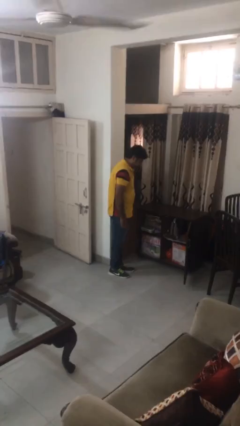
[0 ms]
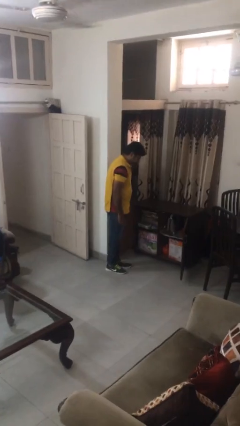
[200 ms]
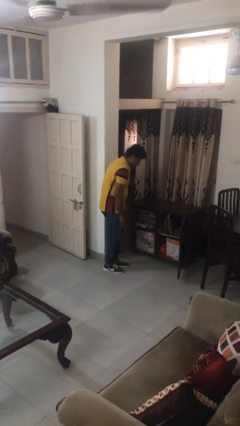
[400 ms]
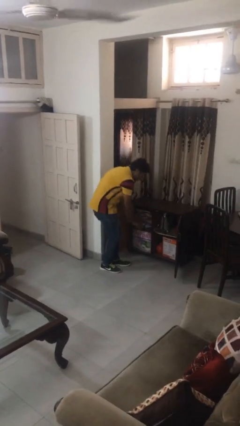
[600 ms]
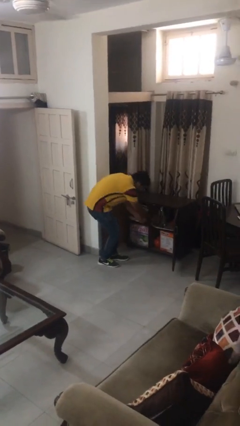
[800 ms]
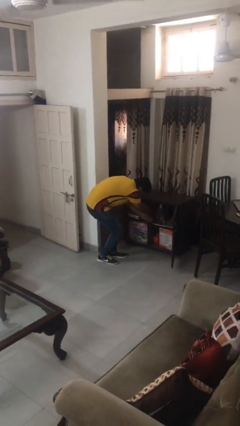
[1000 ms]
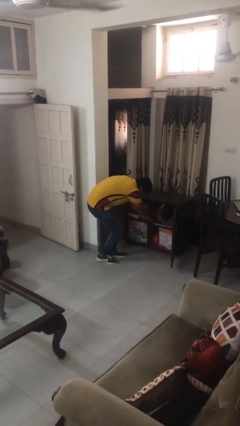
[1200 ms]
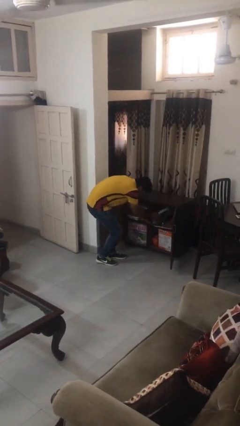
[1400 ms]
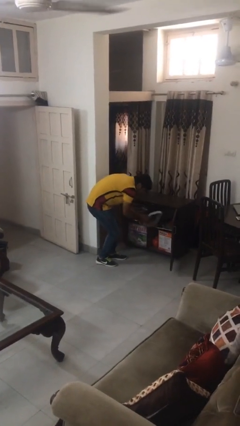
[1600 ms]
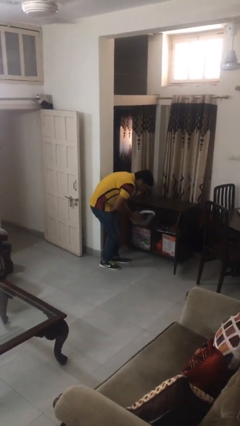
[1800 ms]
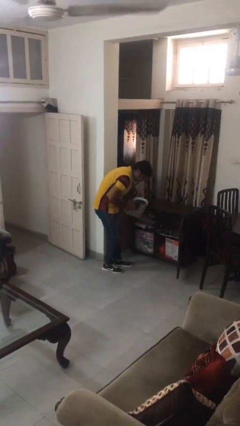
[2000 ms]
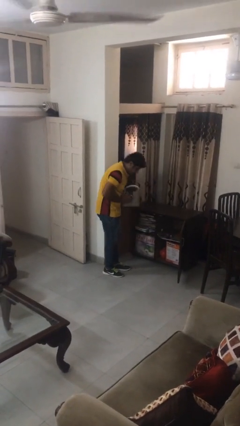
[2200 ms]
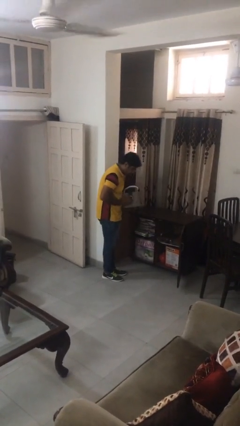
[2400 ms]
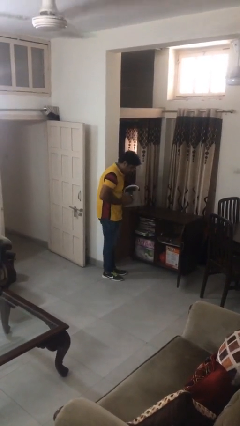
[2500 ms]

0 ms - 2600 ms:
person picks up object from cabinet

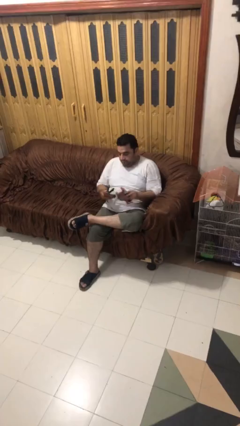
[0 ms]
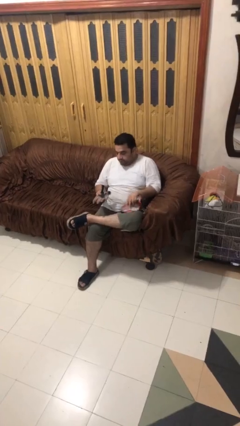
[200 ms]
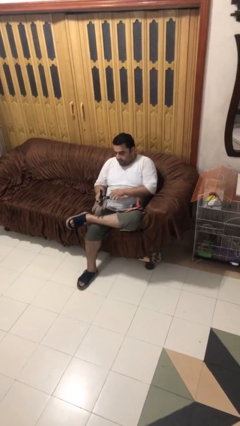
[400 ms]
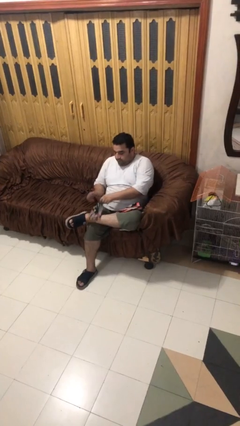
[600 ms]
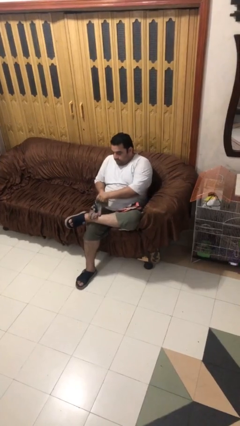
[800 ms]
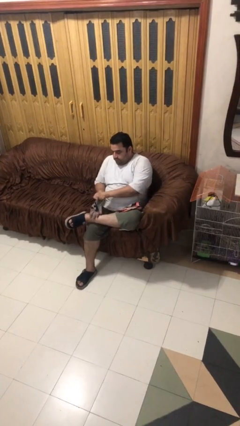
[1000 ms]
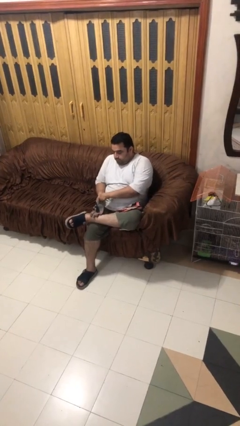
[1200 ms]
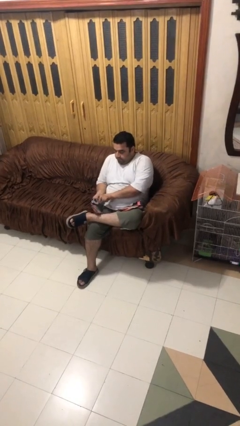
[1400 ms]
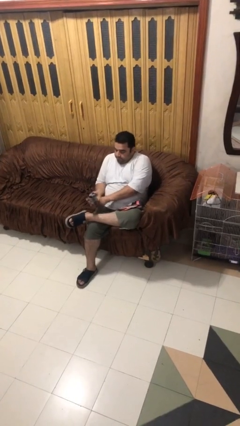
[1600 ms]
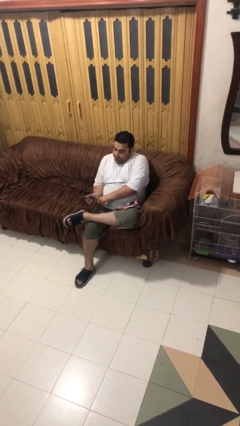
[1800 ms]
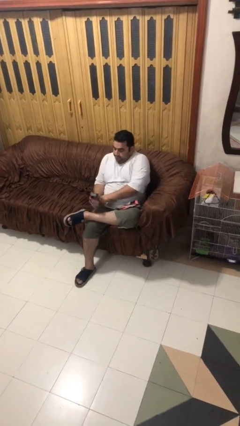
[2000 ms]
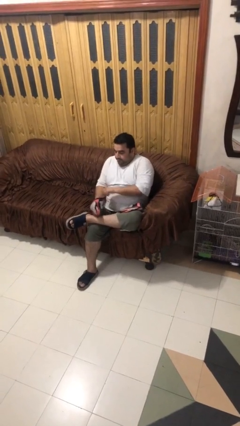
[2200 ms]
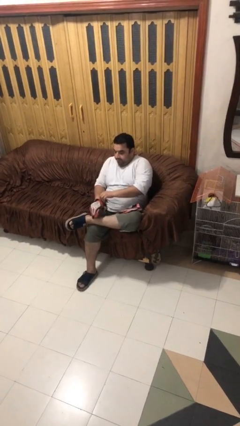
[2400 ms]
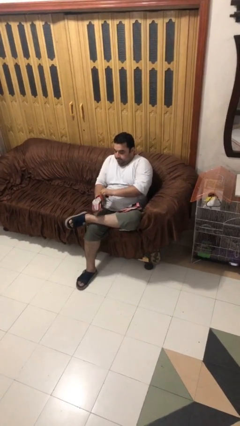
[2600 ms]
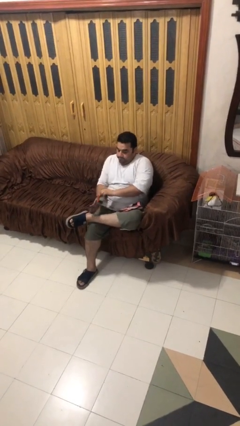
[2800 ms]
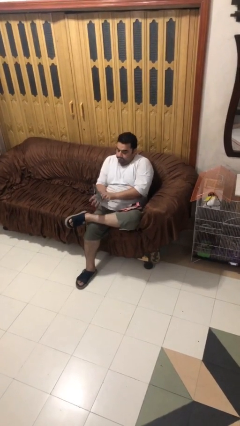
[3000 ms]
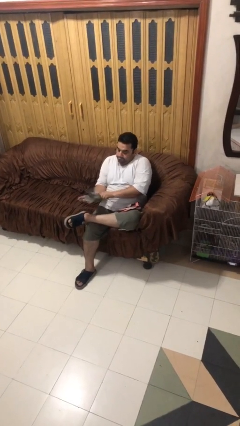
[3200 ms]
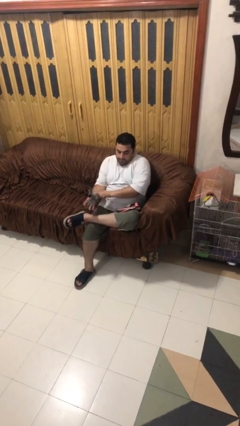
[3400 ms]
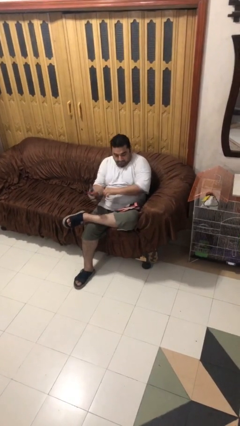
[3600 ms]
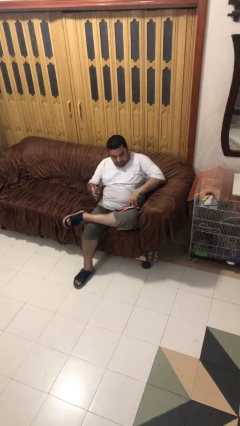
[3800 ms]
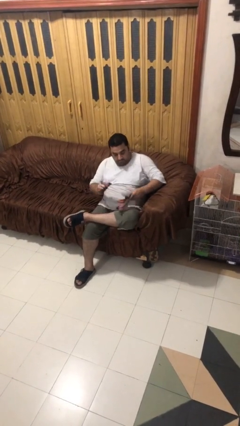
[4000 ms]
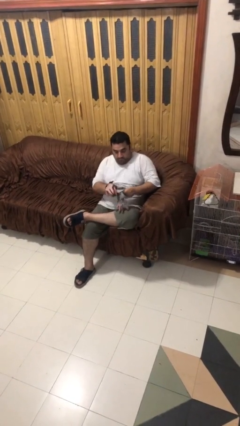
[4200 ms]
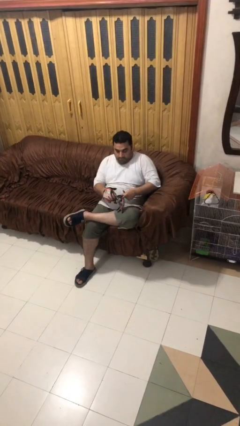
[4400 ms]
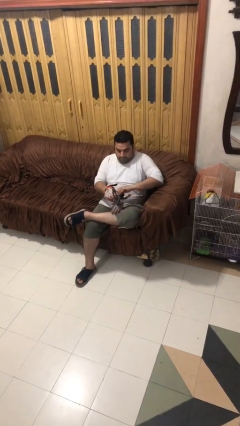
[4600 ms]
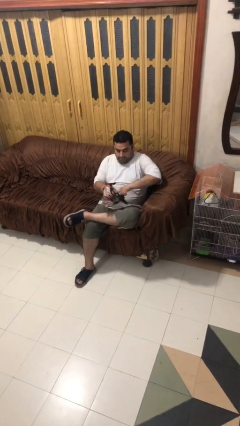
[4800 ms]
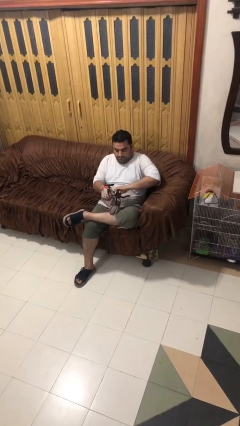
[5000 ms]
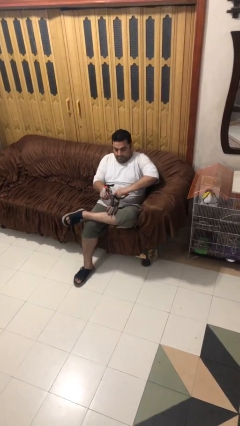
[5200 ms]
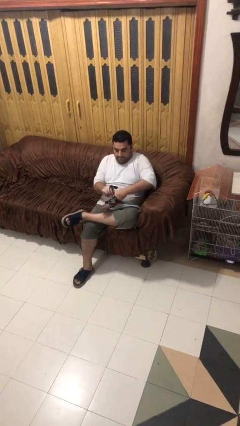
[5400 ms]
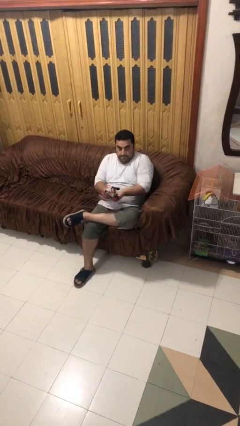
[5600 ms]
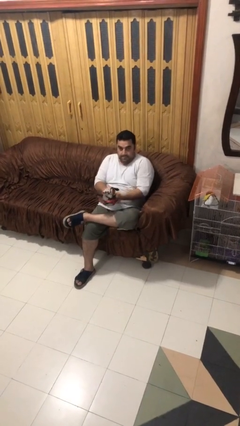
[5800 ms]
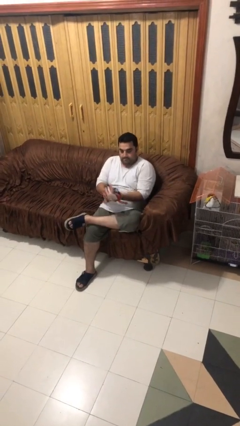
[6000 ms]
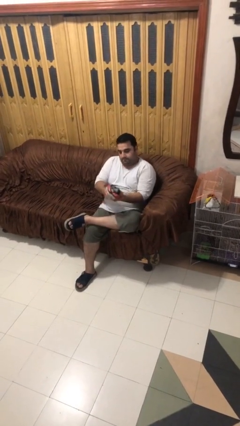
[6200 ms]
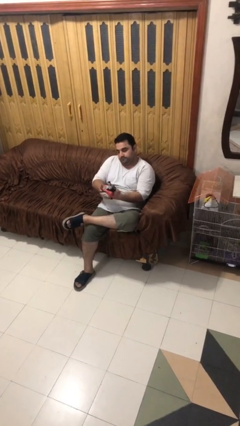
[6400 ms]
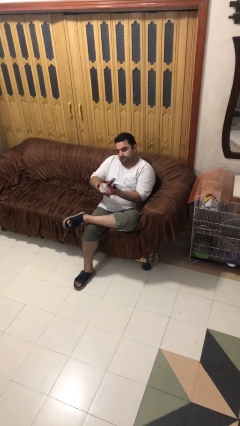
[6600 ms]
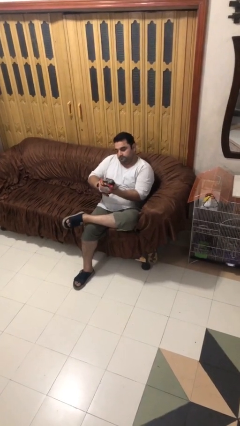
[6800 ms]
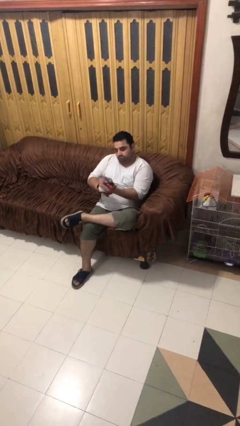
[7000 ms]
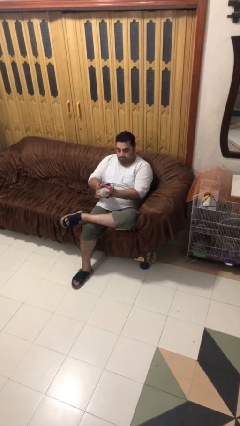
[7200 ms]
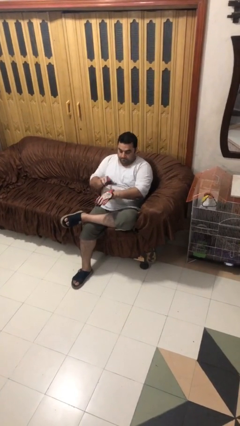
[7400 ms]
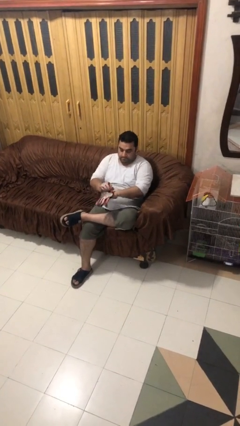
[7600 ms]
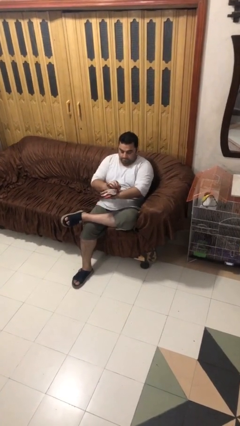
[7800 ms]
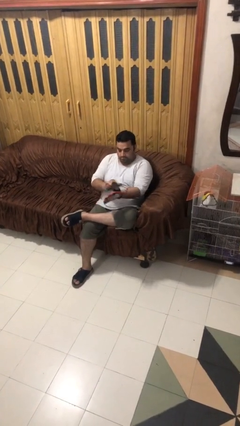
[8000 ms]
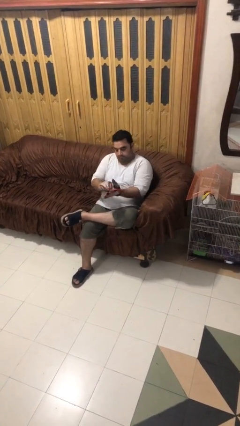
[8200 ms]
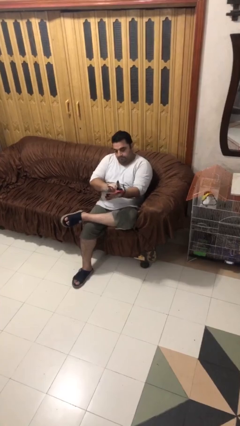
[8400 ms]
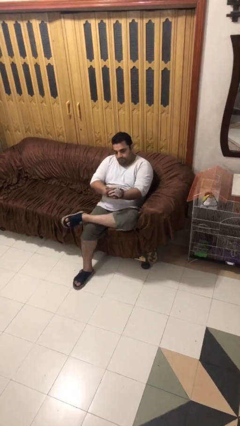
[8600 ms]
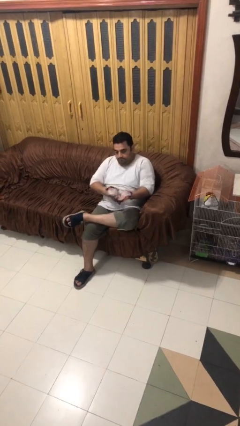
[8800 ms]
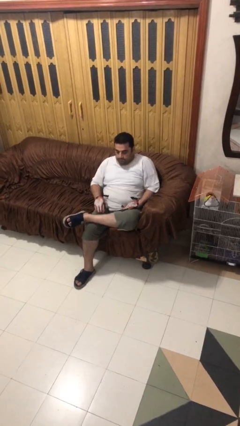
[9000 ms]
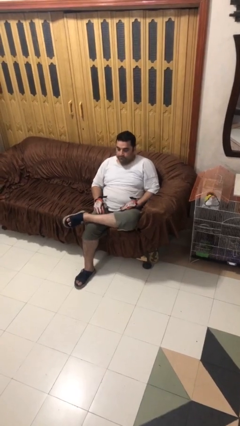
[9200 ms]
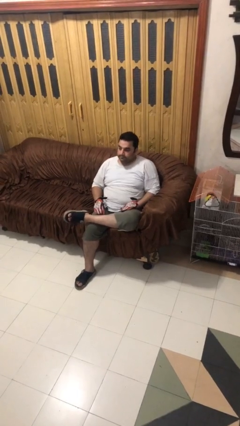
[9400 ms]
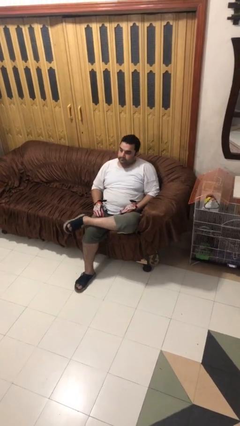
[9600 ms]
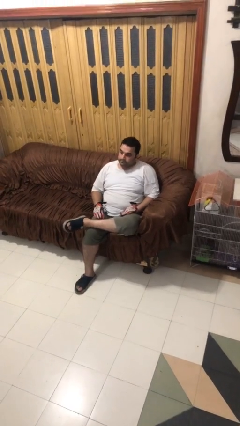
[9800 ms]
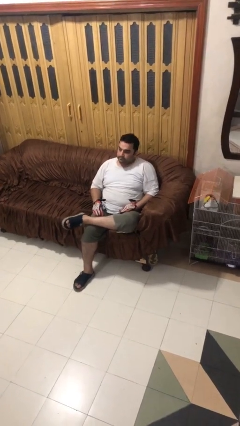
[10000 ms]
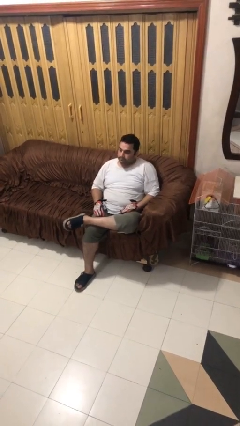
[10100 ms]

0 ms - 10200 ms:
person puts on gloves

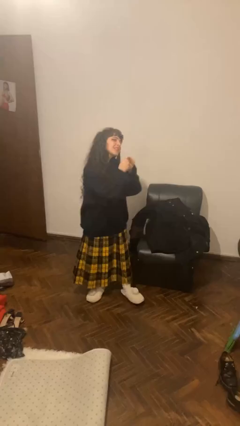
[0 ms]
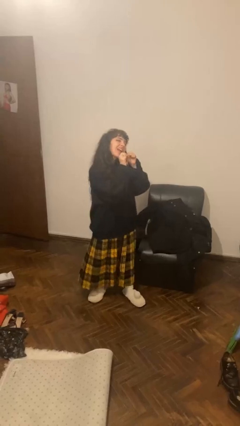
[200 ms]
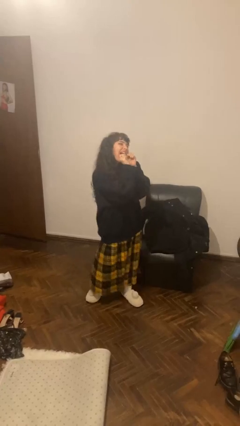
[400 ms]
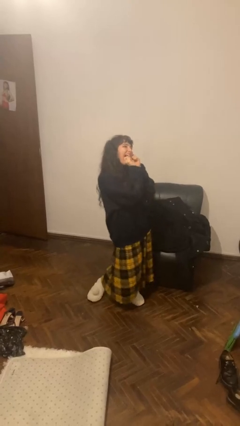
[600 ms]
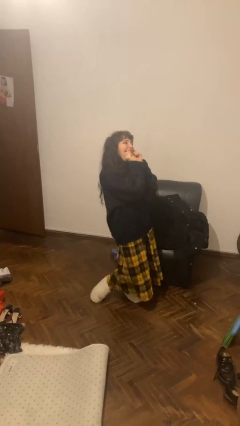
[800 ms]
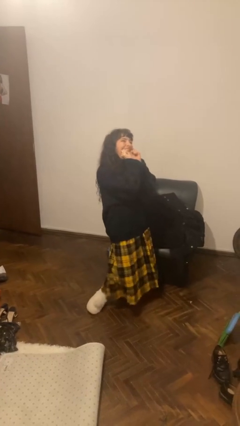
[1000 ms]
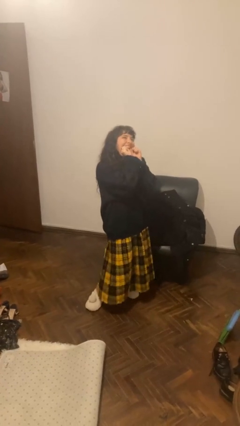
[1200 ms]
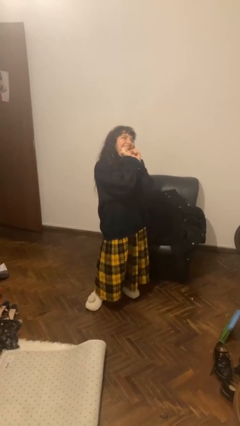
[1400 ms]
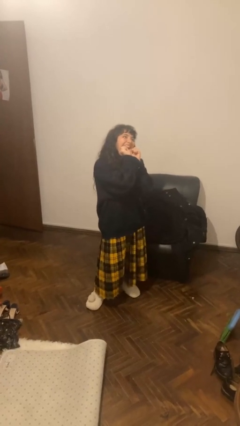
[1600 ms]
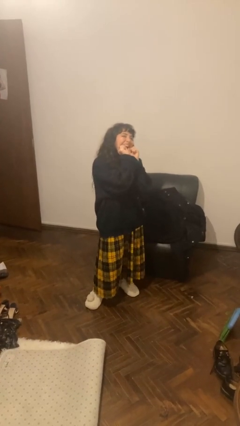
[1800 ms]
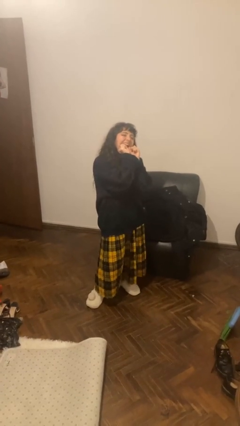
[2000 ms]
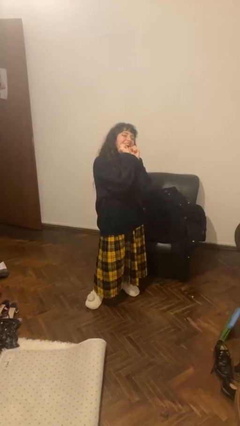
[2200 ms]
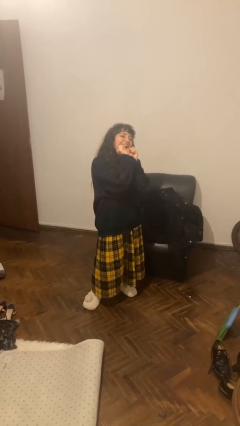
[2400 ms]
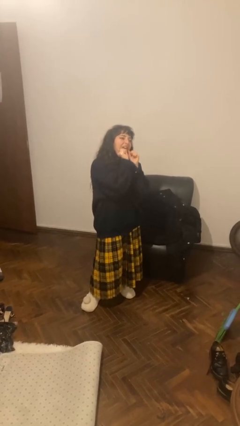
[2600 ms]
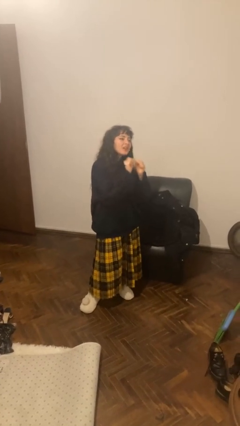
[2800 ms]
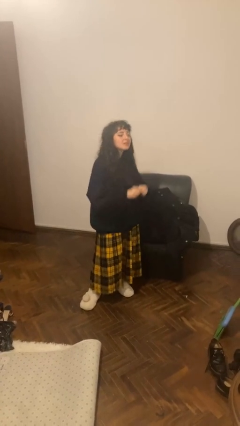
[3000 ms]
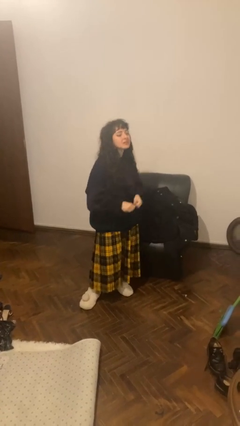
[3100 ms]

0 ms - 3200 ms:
person flosses

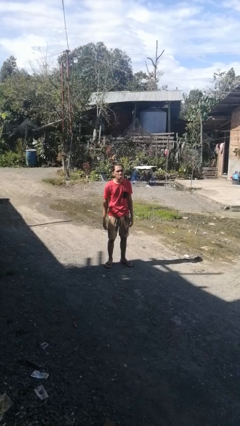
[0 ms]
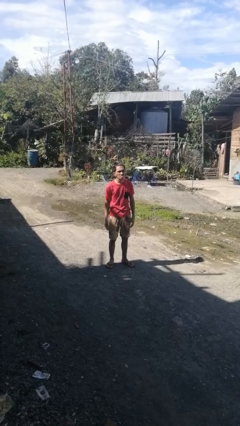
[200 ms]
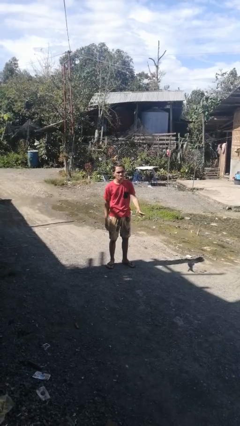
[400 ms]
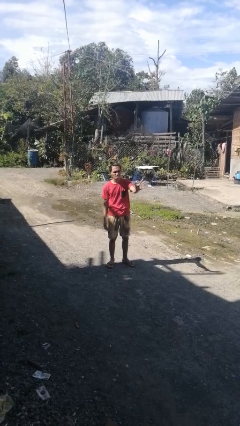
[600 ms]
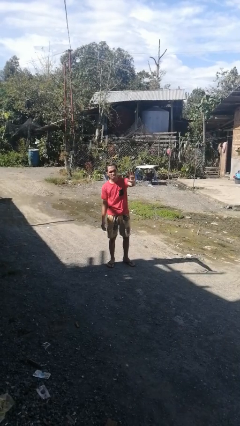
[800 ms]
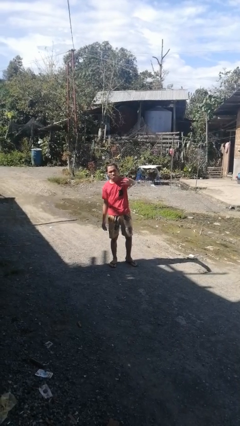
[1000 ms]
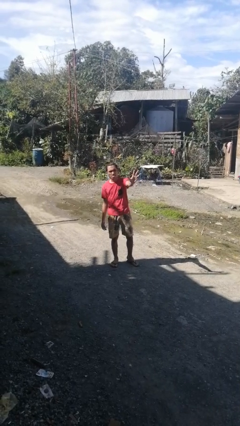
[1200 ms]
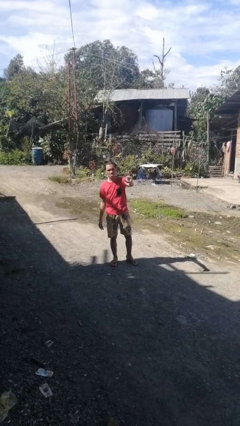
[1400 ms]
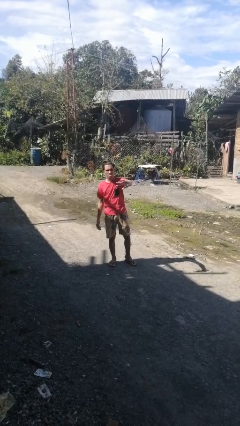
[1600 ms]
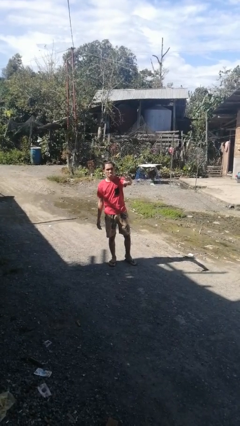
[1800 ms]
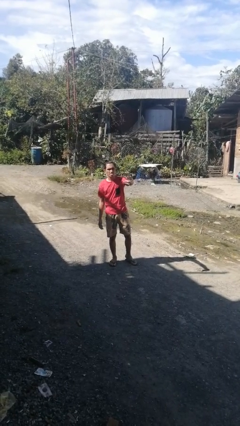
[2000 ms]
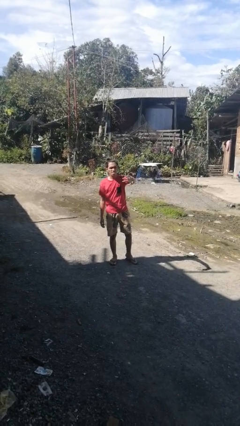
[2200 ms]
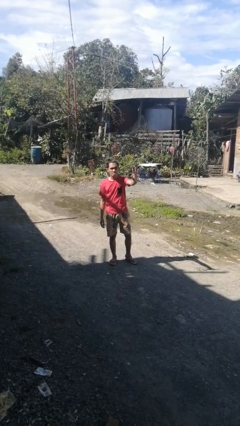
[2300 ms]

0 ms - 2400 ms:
person waves at person
